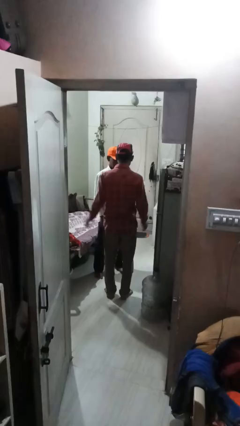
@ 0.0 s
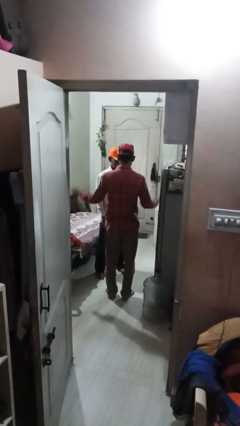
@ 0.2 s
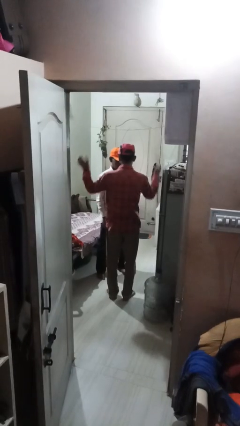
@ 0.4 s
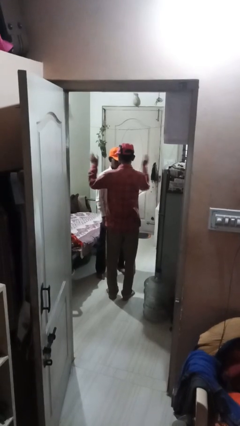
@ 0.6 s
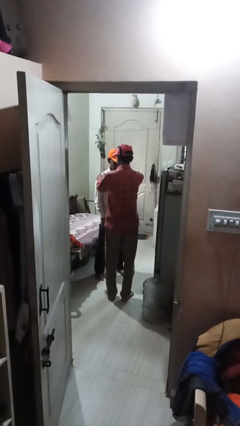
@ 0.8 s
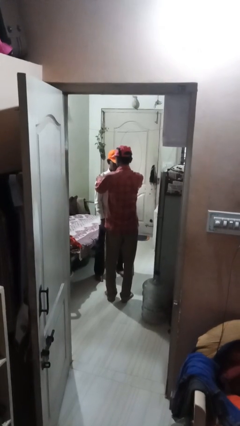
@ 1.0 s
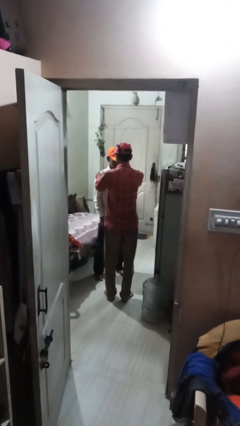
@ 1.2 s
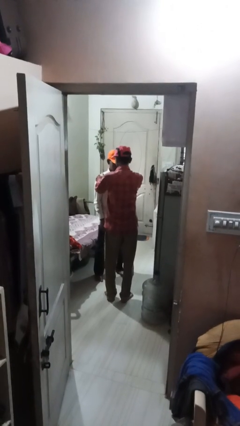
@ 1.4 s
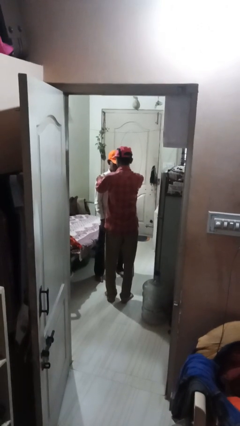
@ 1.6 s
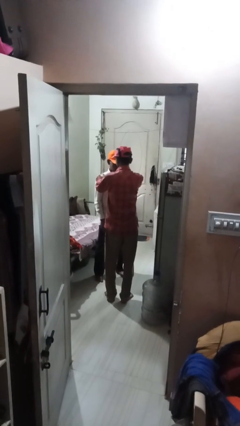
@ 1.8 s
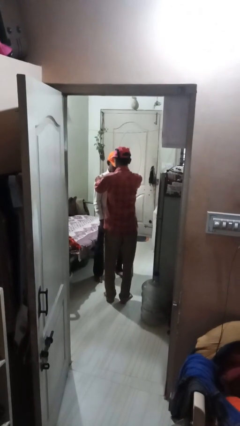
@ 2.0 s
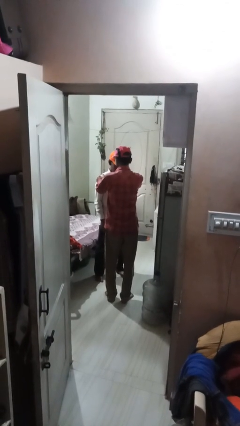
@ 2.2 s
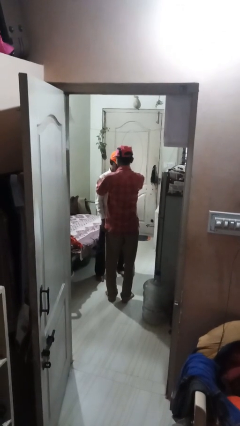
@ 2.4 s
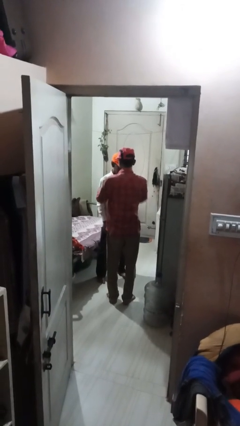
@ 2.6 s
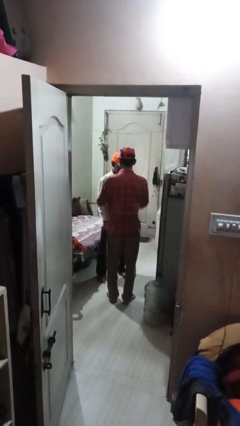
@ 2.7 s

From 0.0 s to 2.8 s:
person pounds shoulders of person

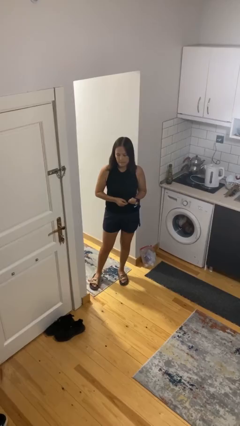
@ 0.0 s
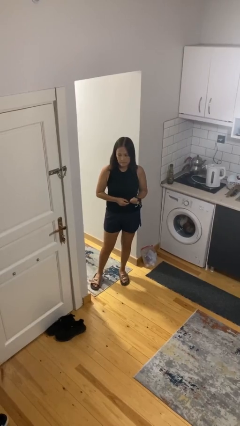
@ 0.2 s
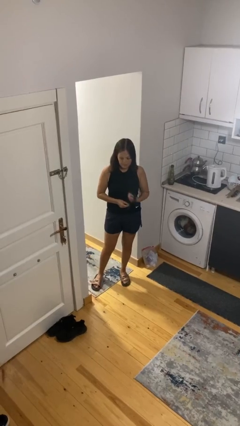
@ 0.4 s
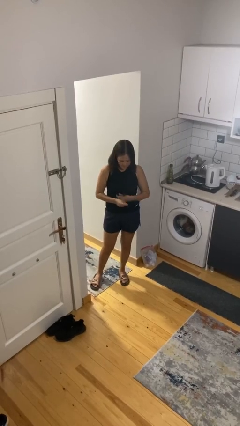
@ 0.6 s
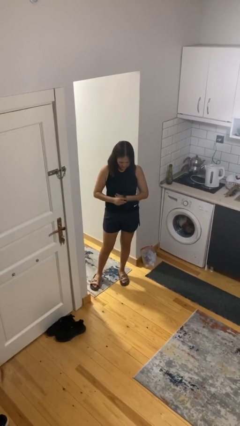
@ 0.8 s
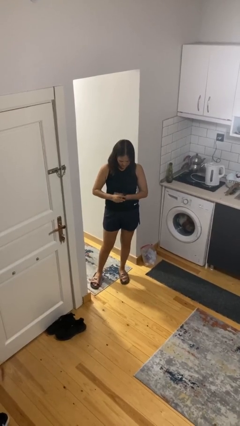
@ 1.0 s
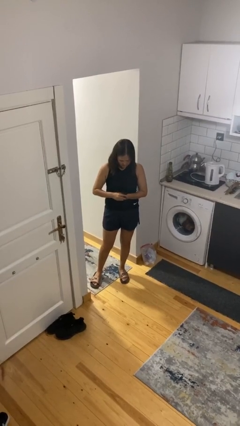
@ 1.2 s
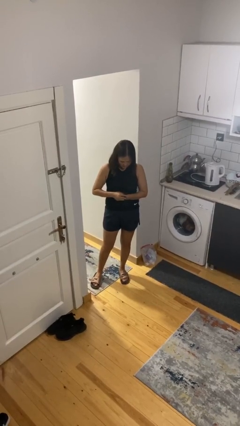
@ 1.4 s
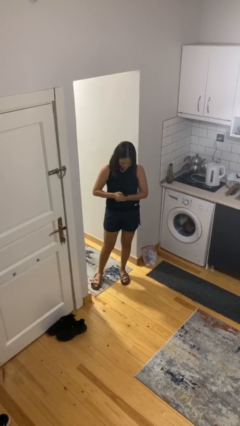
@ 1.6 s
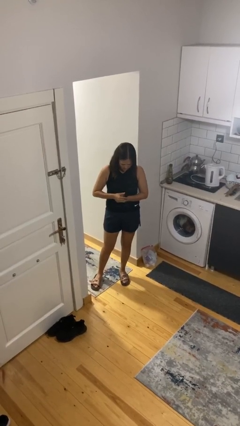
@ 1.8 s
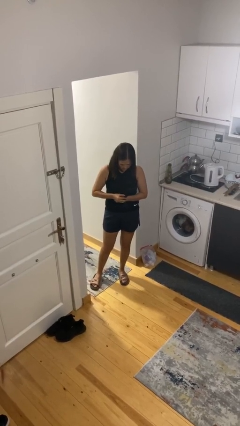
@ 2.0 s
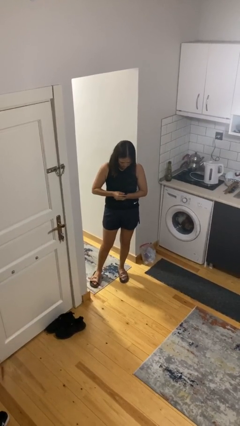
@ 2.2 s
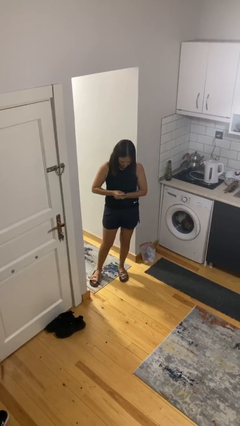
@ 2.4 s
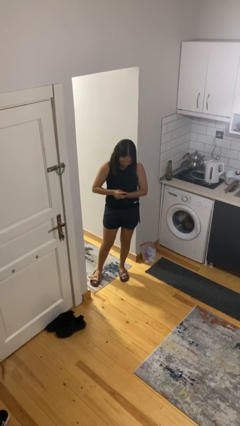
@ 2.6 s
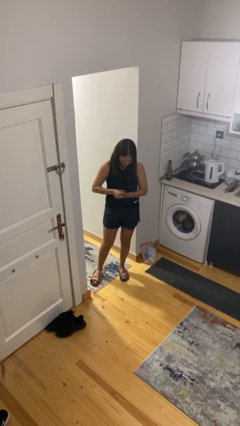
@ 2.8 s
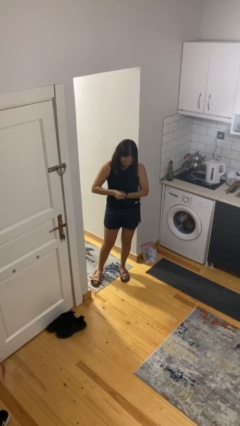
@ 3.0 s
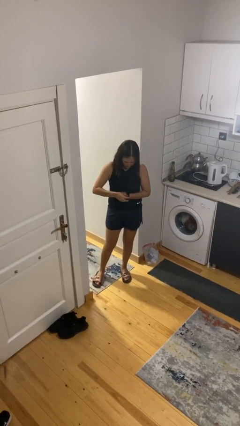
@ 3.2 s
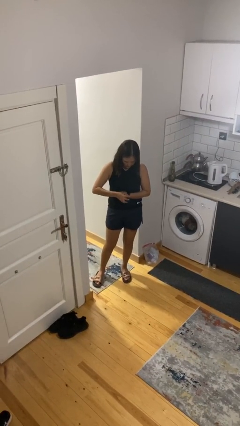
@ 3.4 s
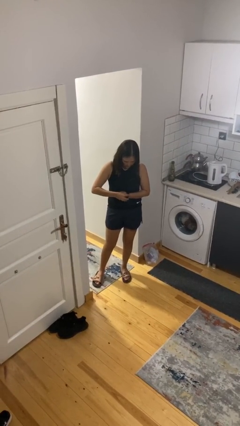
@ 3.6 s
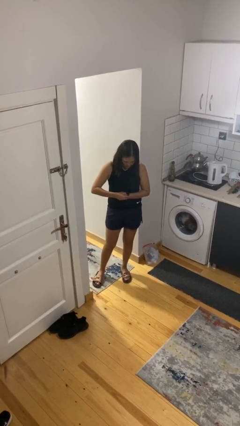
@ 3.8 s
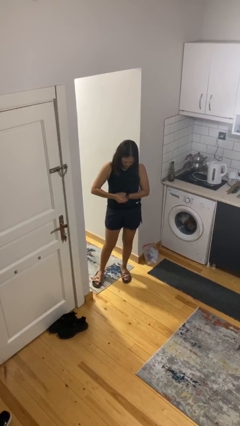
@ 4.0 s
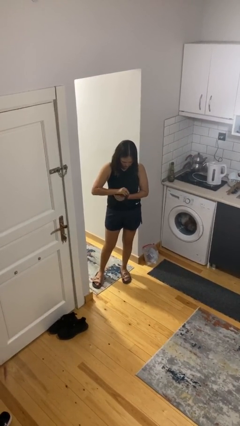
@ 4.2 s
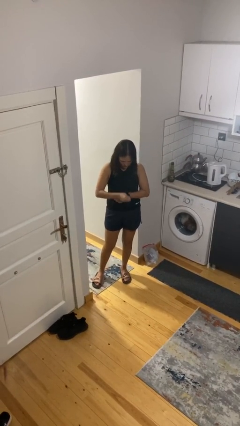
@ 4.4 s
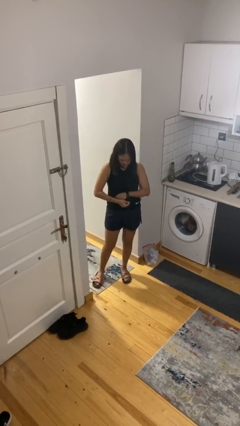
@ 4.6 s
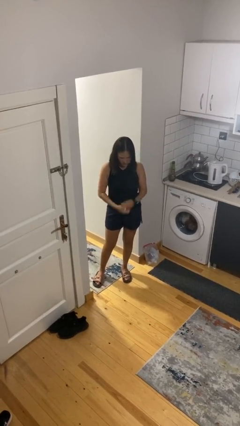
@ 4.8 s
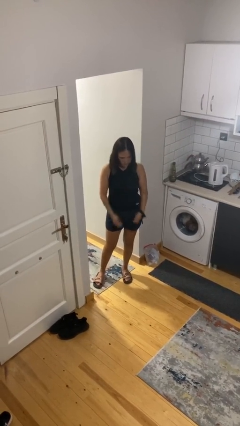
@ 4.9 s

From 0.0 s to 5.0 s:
person puts on wristwatch

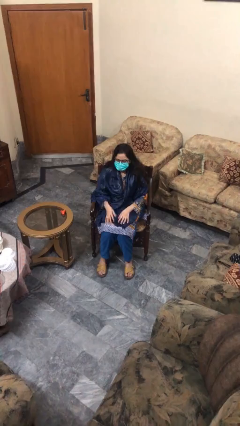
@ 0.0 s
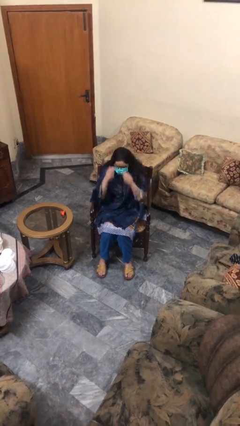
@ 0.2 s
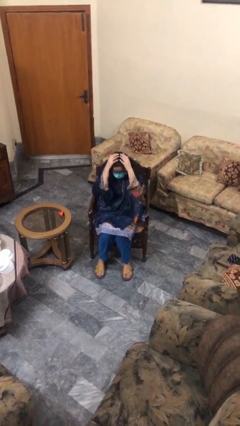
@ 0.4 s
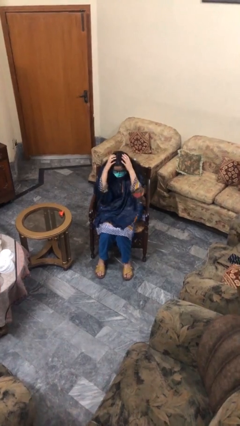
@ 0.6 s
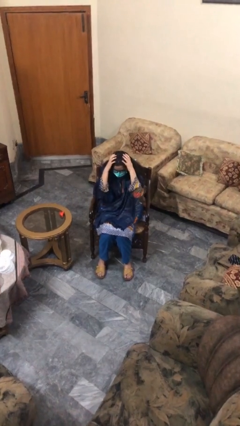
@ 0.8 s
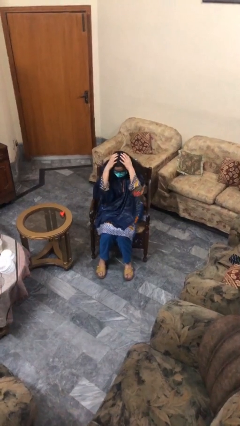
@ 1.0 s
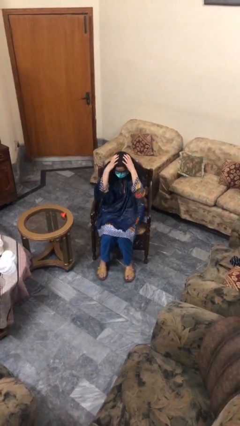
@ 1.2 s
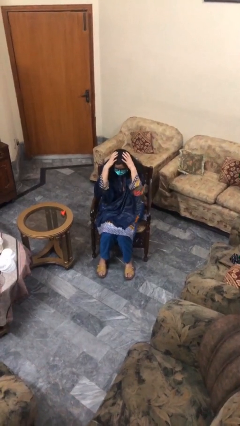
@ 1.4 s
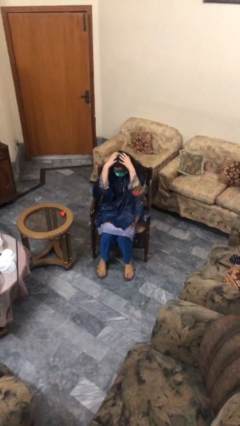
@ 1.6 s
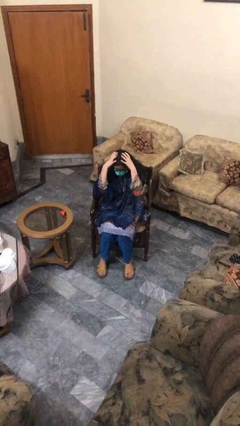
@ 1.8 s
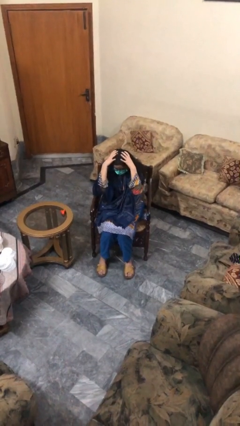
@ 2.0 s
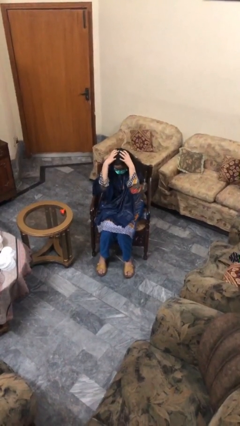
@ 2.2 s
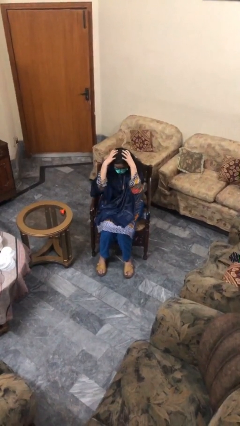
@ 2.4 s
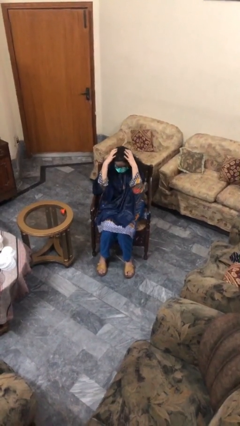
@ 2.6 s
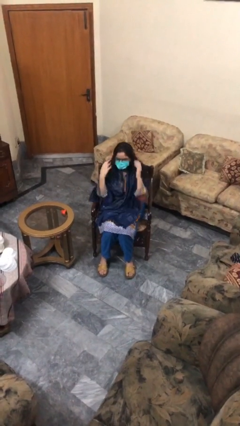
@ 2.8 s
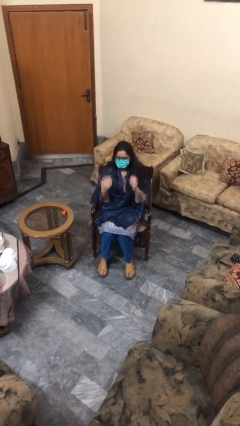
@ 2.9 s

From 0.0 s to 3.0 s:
person pats head

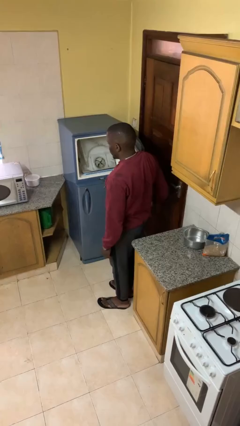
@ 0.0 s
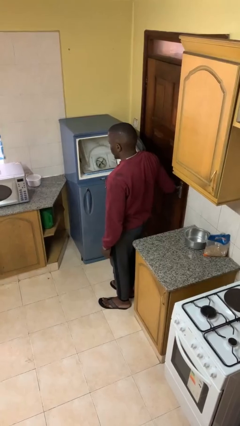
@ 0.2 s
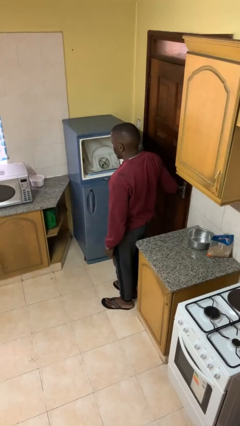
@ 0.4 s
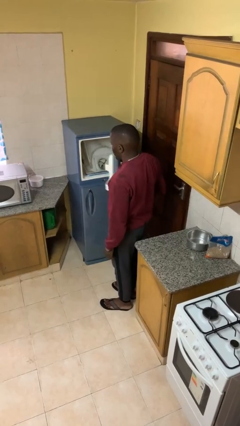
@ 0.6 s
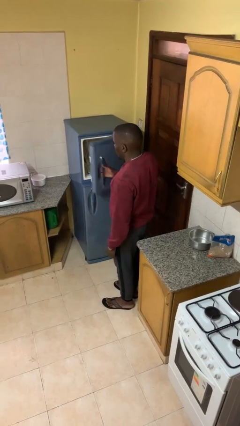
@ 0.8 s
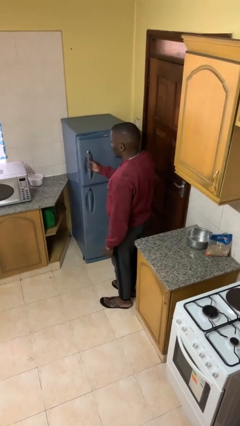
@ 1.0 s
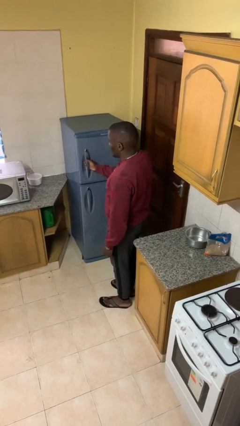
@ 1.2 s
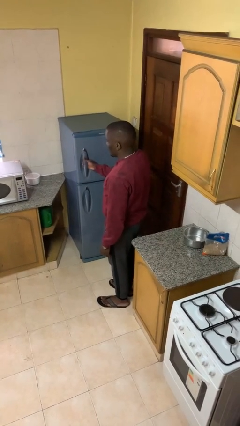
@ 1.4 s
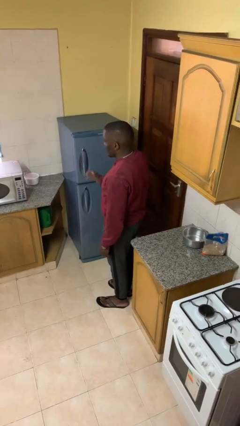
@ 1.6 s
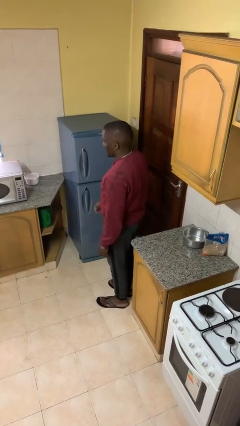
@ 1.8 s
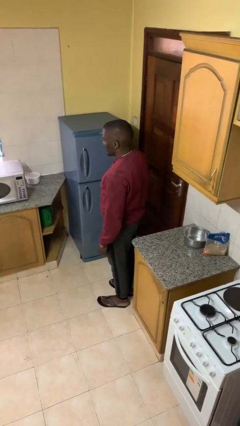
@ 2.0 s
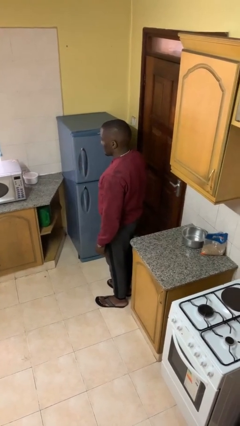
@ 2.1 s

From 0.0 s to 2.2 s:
person closes refrigerator

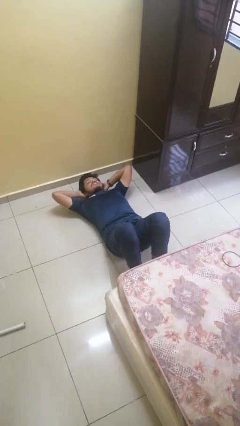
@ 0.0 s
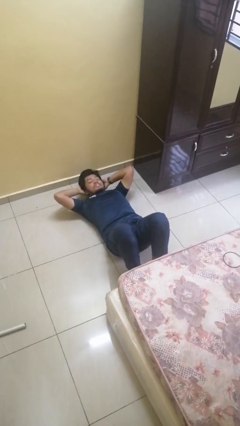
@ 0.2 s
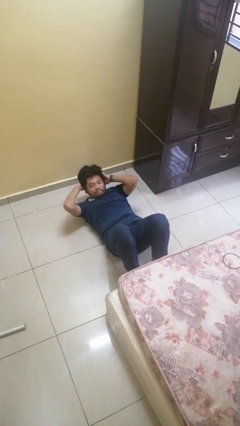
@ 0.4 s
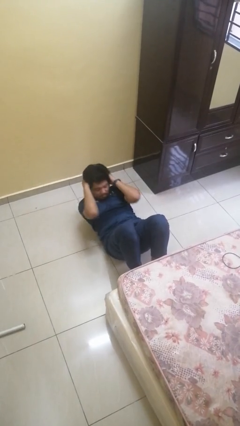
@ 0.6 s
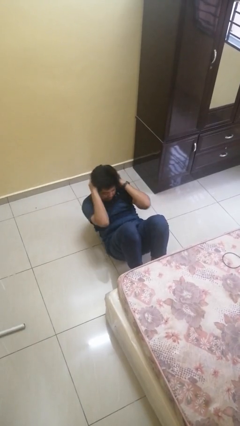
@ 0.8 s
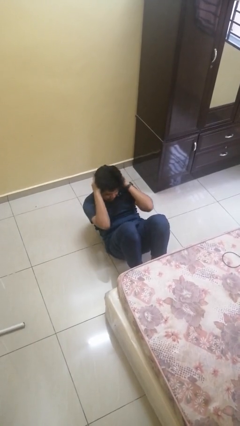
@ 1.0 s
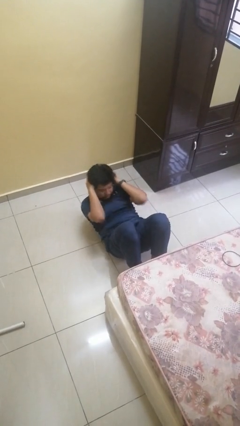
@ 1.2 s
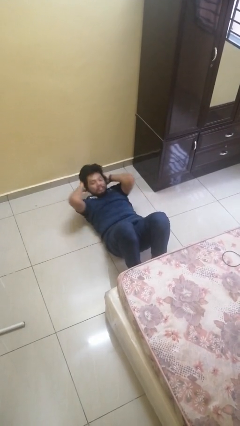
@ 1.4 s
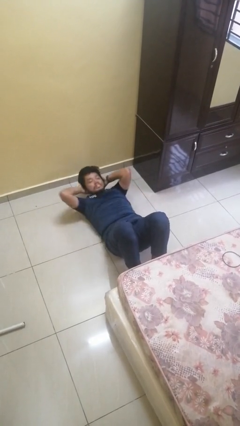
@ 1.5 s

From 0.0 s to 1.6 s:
person exercises with situp

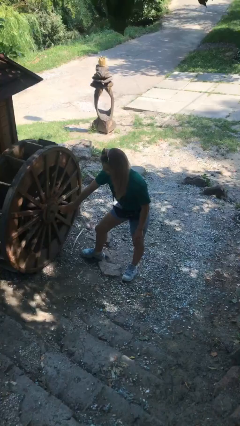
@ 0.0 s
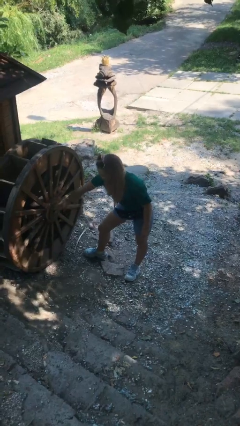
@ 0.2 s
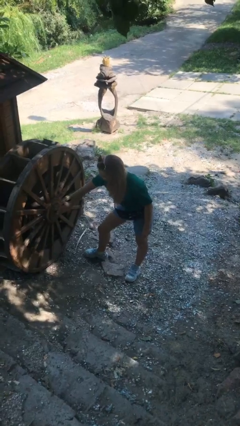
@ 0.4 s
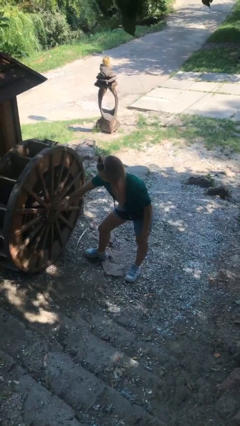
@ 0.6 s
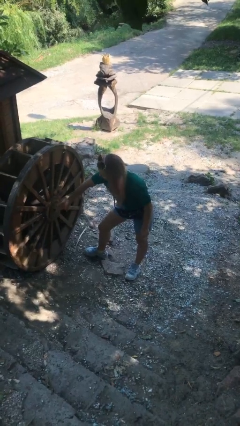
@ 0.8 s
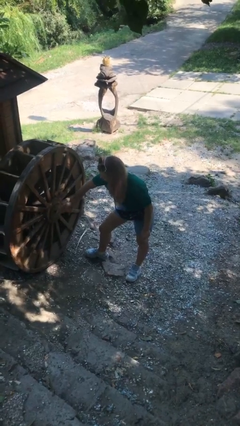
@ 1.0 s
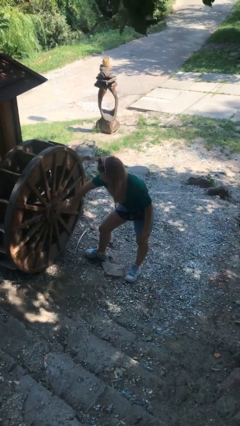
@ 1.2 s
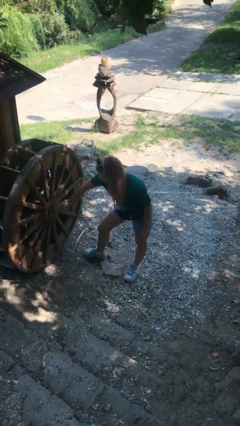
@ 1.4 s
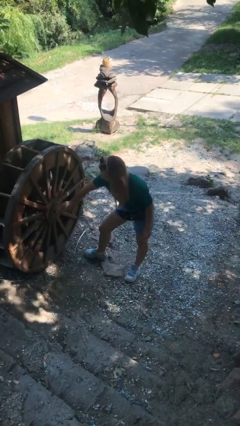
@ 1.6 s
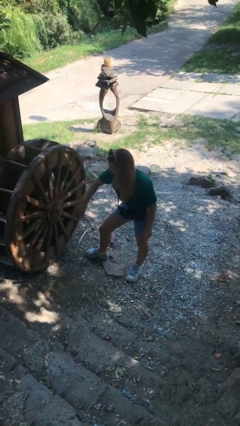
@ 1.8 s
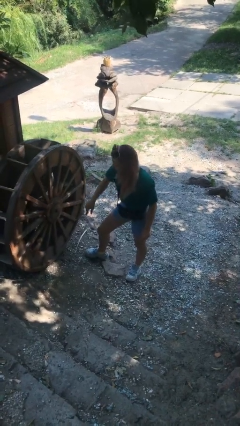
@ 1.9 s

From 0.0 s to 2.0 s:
person taps object with finger

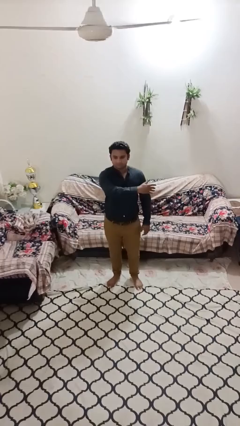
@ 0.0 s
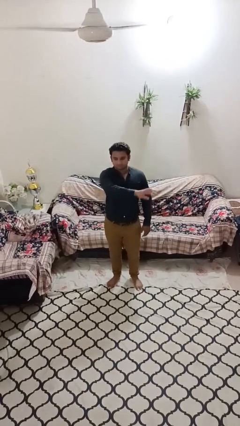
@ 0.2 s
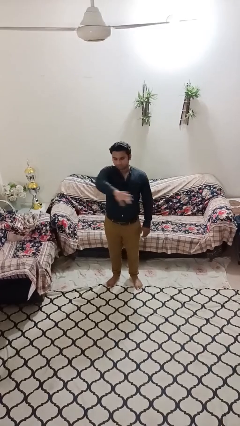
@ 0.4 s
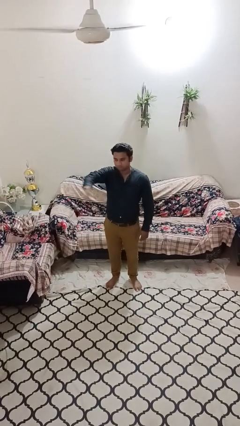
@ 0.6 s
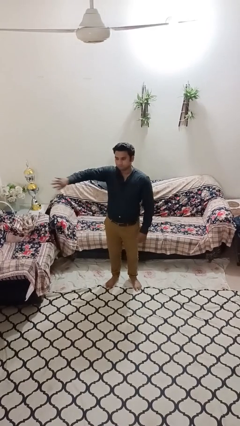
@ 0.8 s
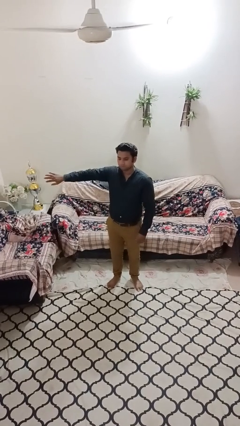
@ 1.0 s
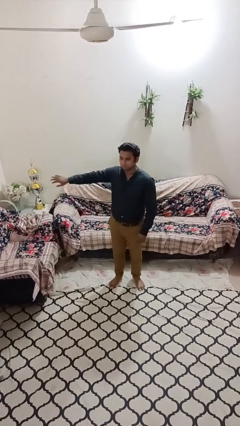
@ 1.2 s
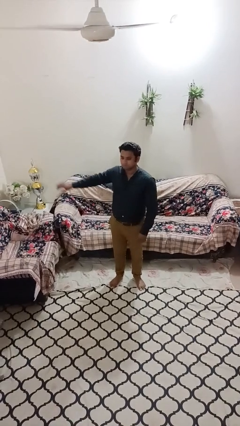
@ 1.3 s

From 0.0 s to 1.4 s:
person gestures swipe right
